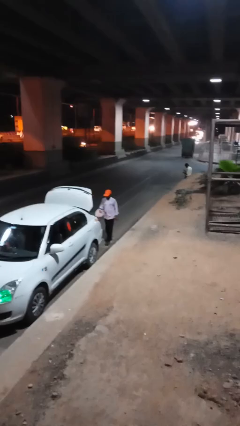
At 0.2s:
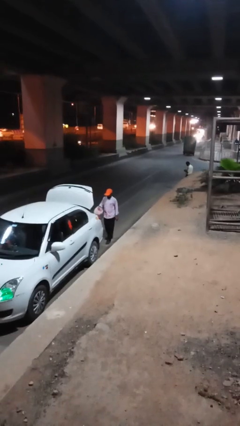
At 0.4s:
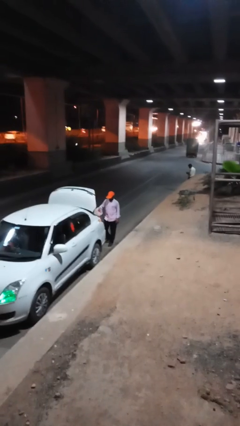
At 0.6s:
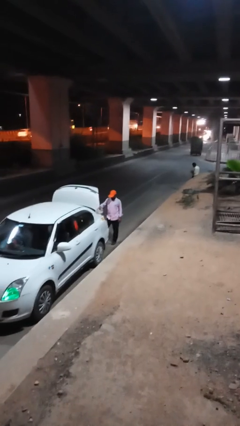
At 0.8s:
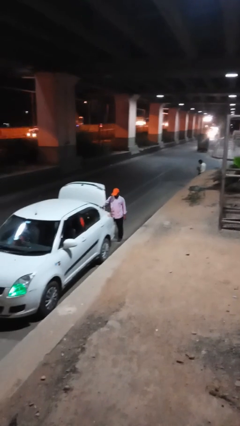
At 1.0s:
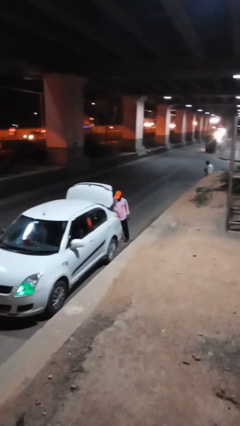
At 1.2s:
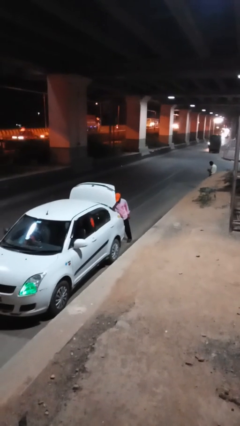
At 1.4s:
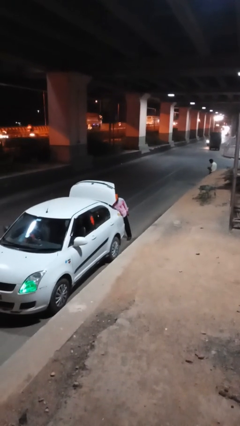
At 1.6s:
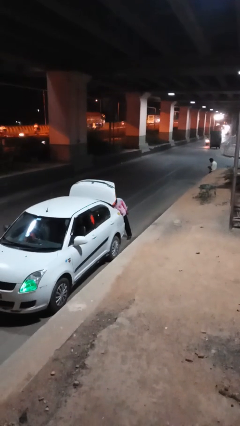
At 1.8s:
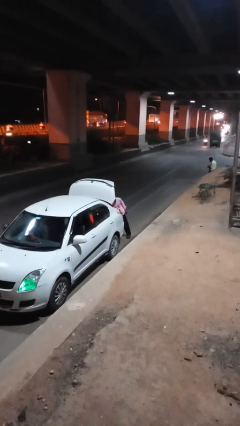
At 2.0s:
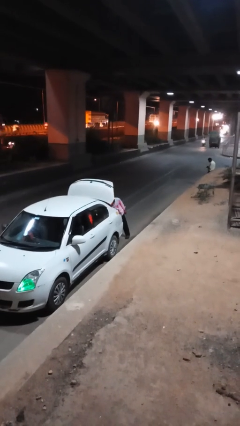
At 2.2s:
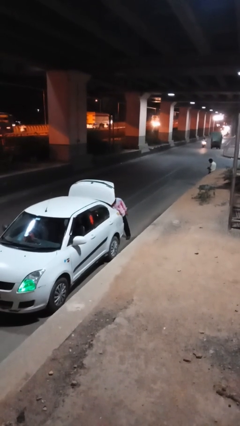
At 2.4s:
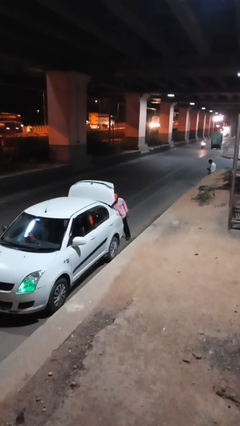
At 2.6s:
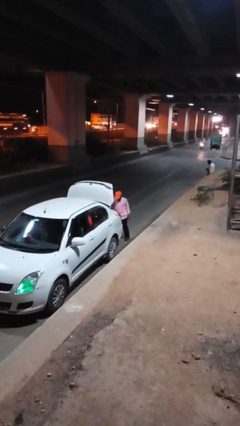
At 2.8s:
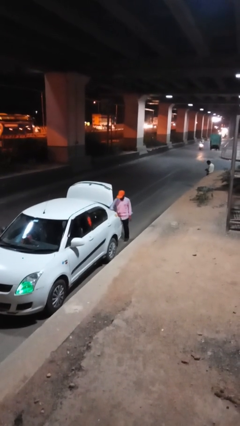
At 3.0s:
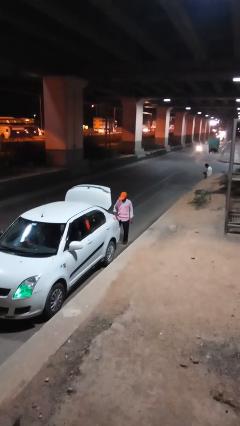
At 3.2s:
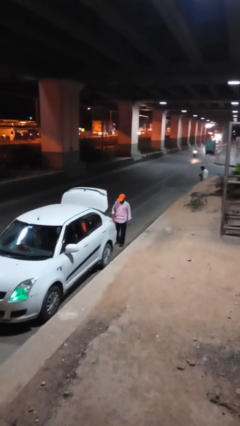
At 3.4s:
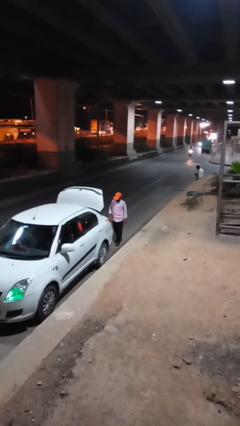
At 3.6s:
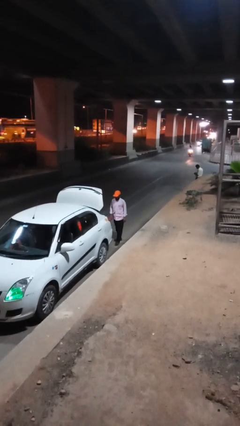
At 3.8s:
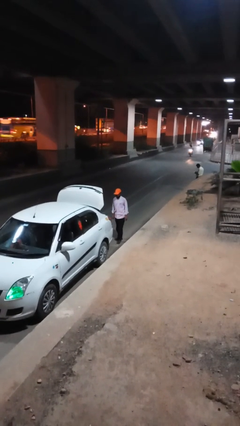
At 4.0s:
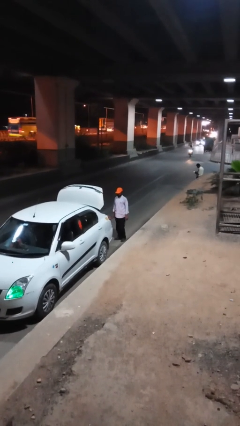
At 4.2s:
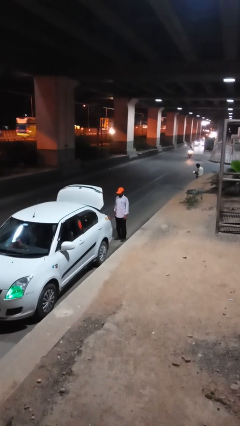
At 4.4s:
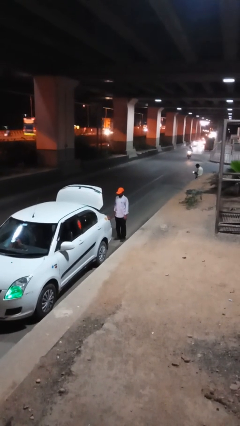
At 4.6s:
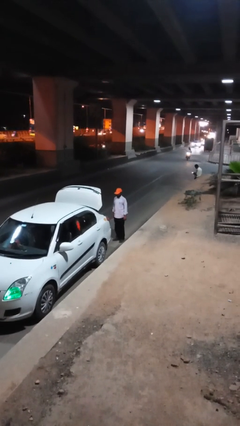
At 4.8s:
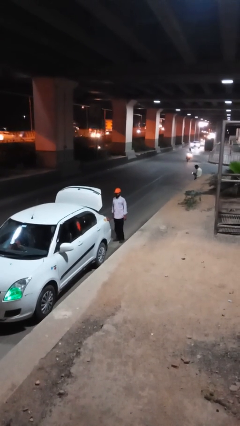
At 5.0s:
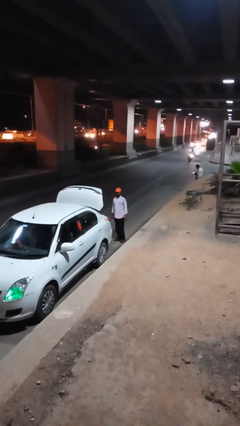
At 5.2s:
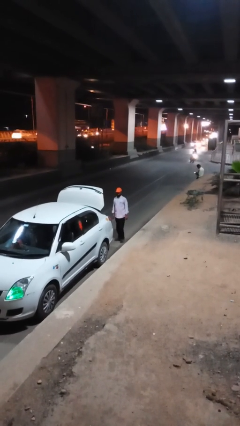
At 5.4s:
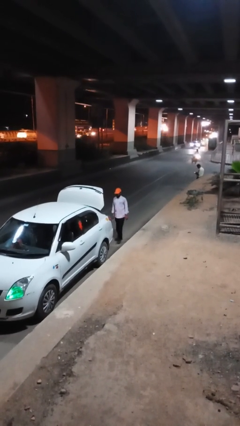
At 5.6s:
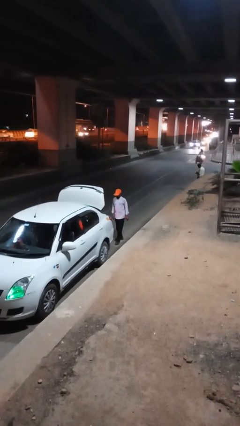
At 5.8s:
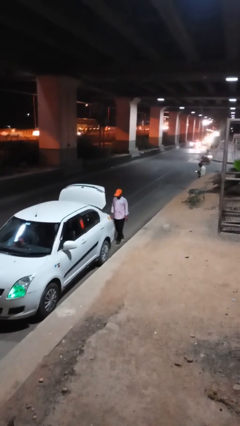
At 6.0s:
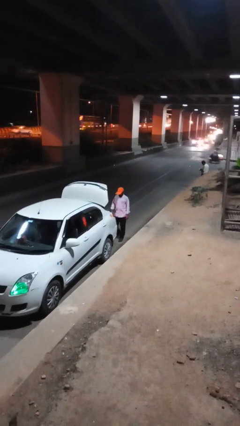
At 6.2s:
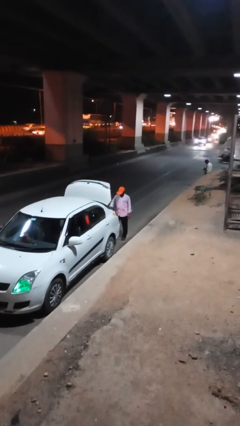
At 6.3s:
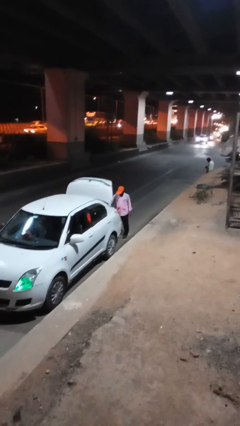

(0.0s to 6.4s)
person loads car

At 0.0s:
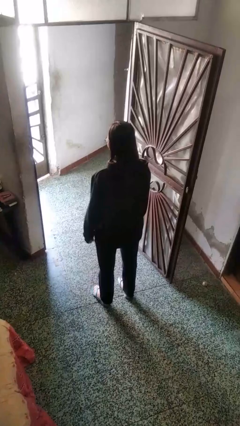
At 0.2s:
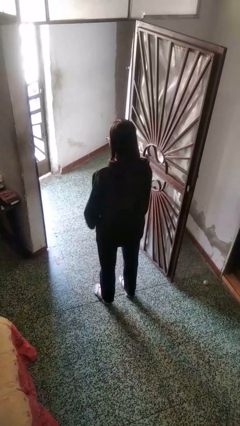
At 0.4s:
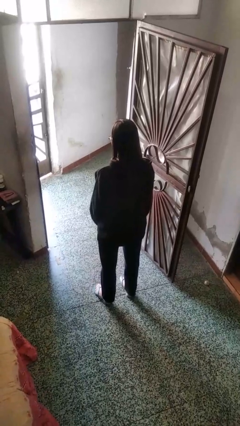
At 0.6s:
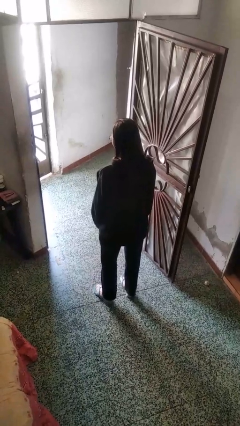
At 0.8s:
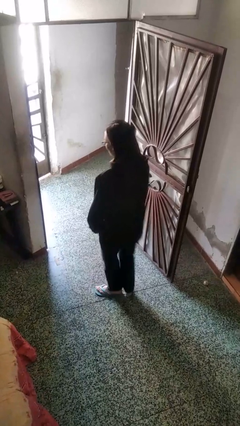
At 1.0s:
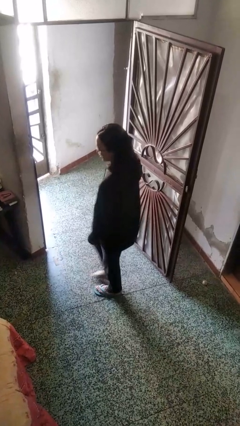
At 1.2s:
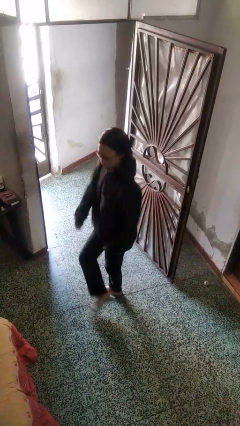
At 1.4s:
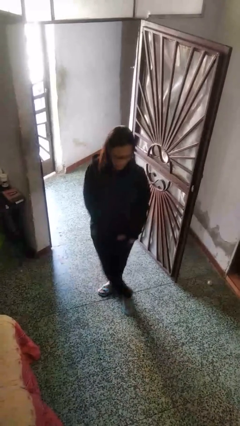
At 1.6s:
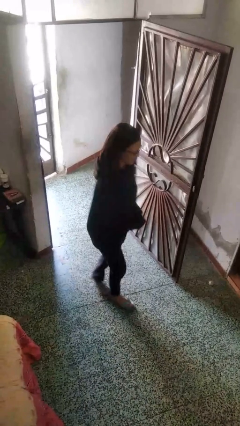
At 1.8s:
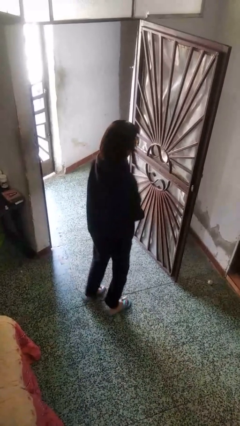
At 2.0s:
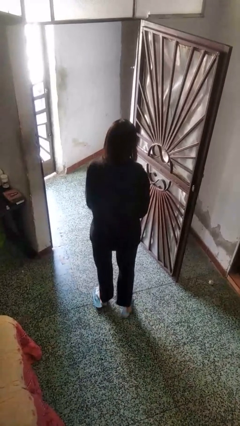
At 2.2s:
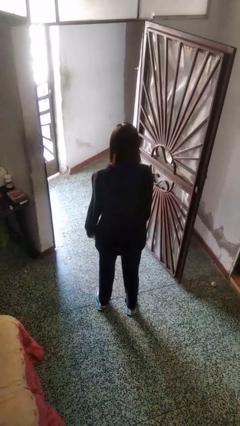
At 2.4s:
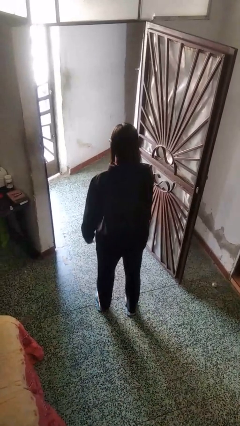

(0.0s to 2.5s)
person twirls

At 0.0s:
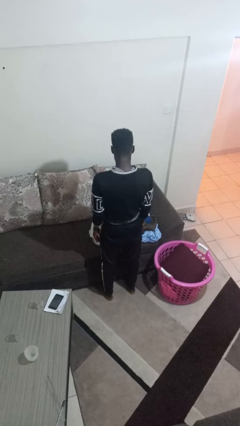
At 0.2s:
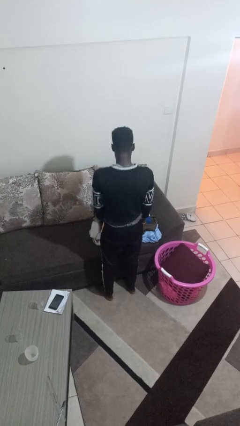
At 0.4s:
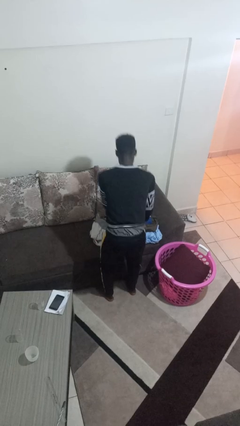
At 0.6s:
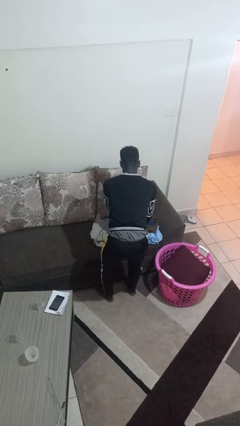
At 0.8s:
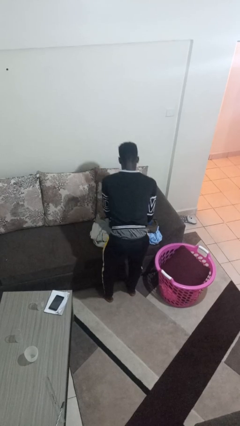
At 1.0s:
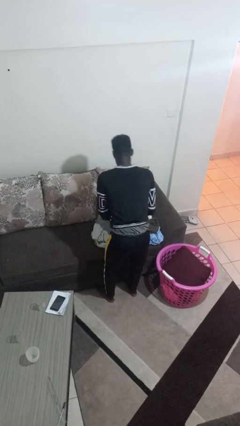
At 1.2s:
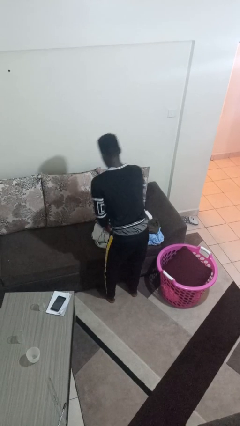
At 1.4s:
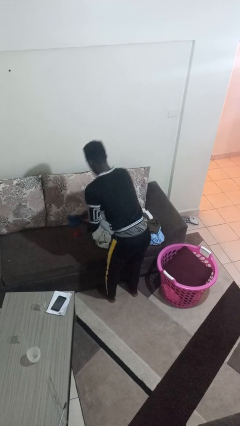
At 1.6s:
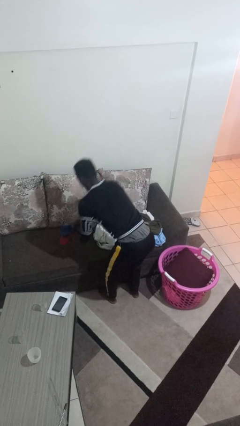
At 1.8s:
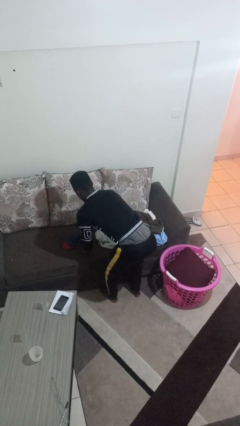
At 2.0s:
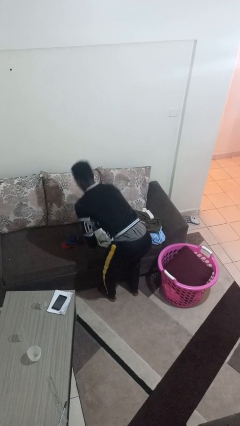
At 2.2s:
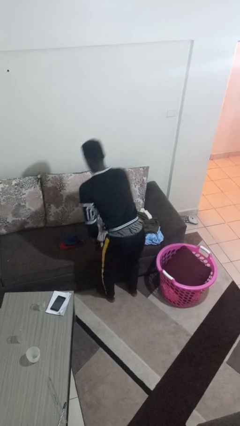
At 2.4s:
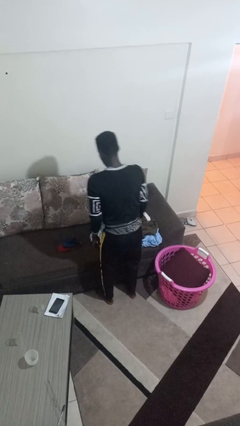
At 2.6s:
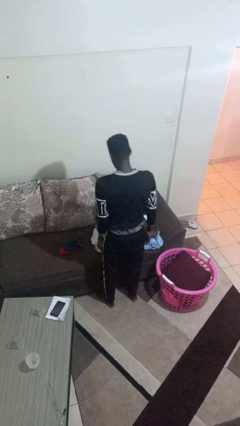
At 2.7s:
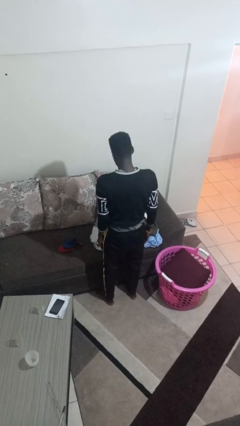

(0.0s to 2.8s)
person folds socks

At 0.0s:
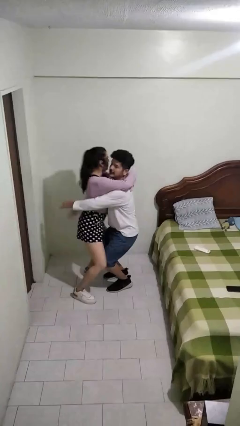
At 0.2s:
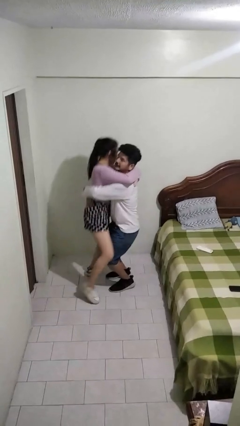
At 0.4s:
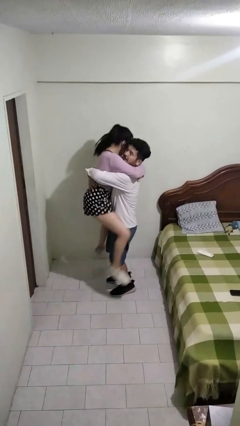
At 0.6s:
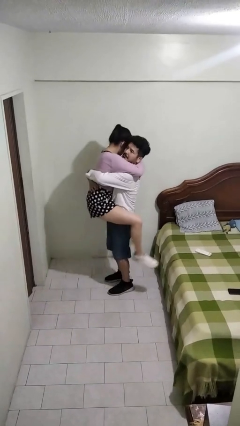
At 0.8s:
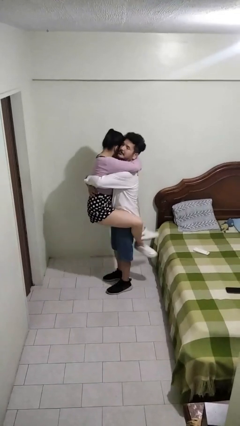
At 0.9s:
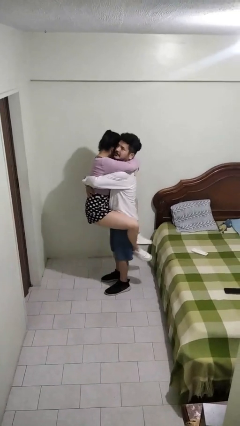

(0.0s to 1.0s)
person picks up person

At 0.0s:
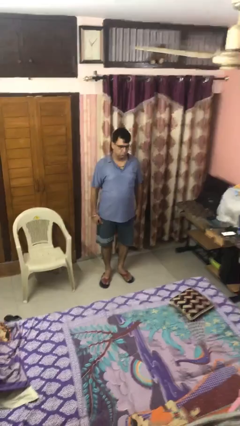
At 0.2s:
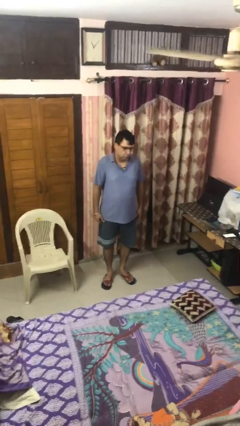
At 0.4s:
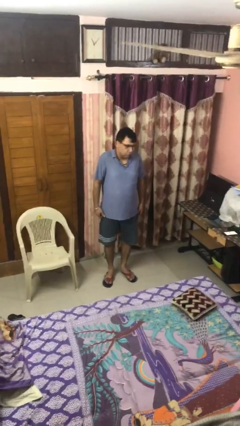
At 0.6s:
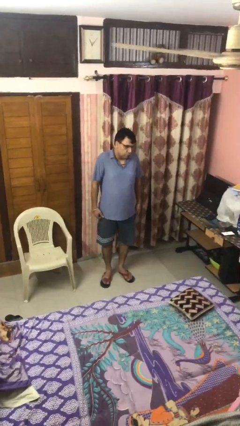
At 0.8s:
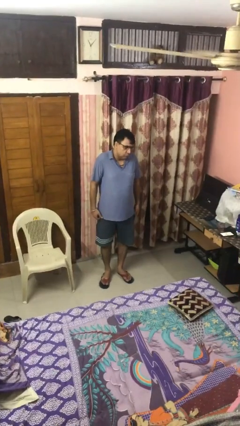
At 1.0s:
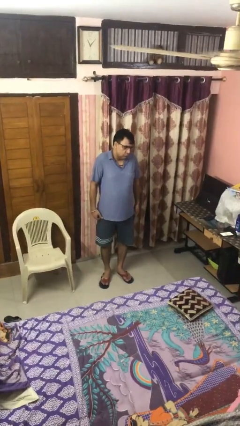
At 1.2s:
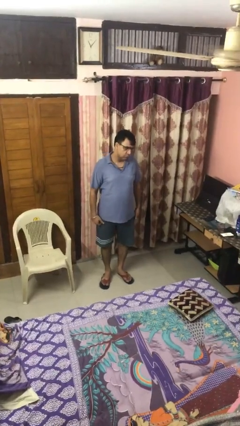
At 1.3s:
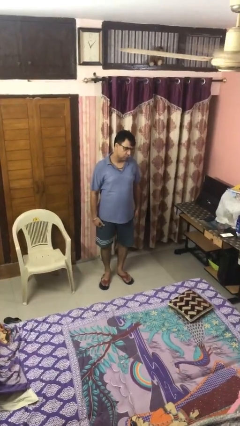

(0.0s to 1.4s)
person shrugs

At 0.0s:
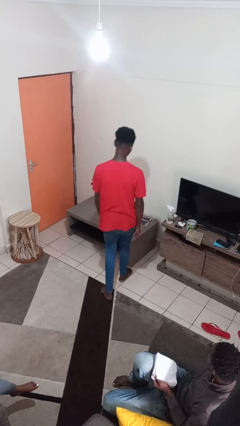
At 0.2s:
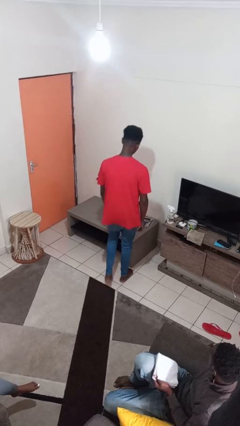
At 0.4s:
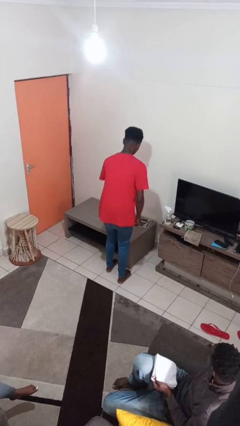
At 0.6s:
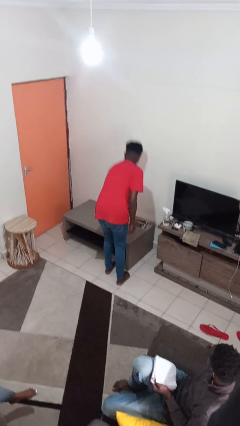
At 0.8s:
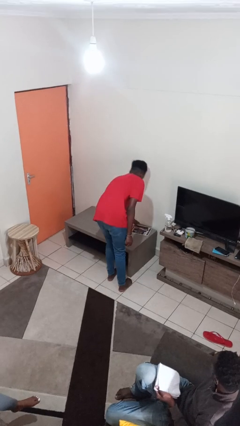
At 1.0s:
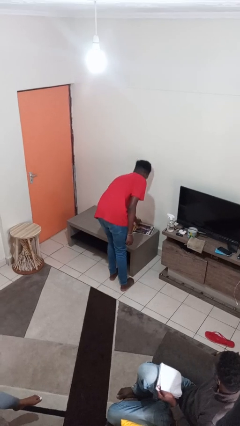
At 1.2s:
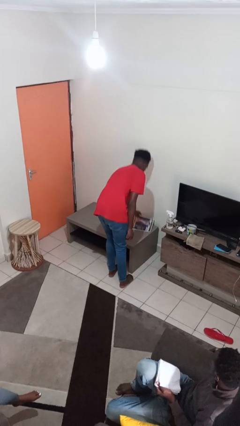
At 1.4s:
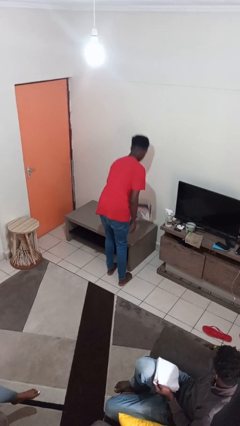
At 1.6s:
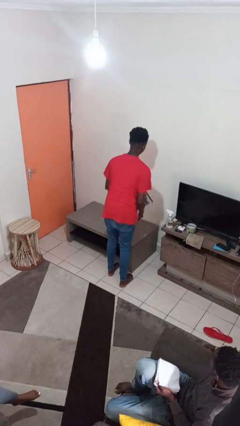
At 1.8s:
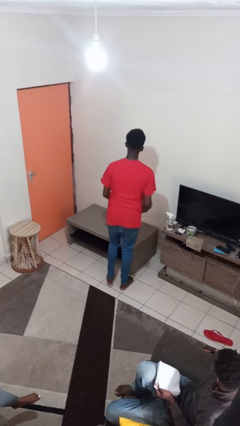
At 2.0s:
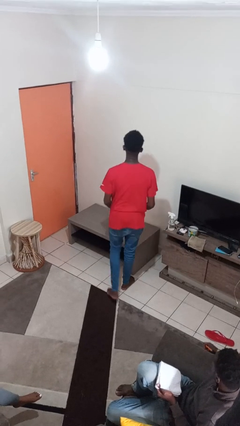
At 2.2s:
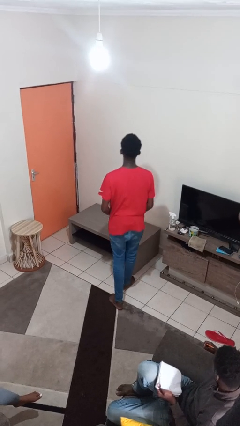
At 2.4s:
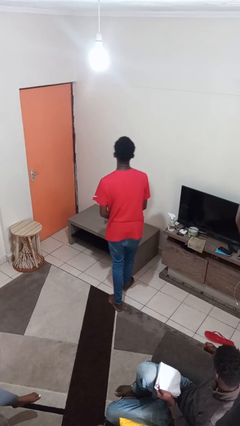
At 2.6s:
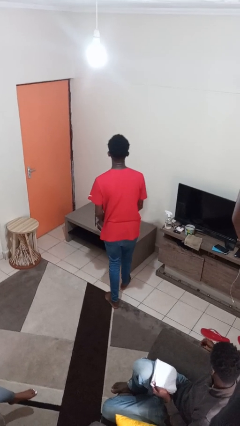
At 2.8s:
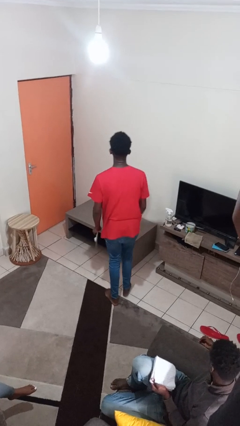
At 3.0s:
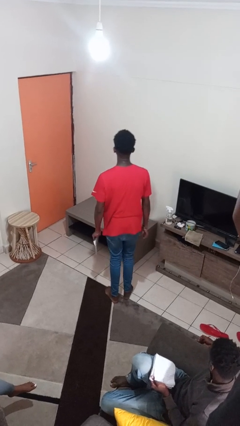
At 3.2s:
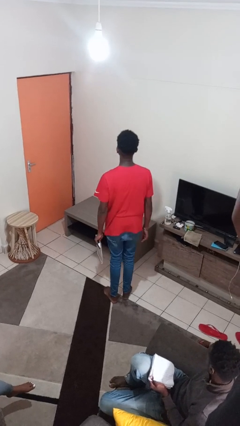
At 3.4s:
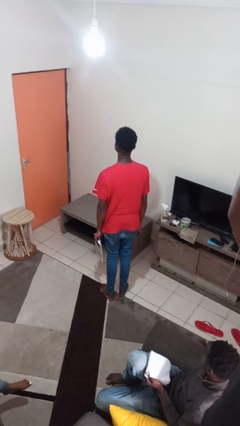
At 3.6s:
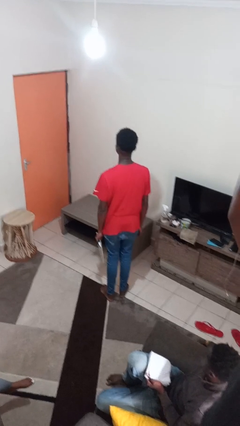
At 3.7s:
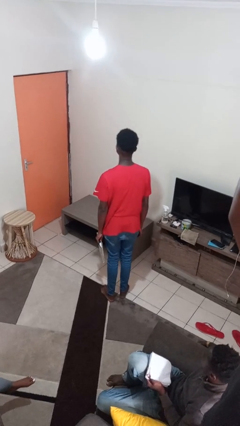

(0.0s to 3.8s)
person picks up object from table
